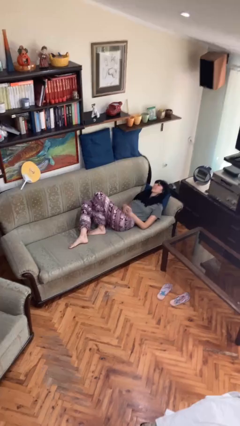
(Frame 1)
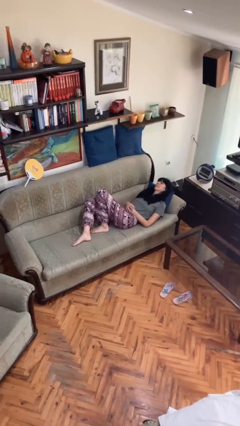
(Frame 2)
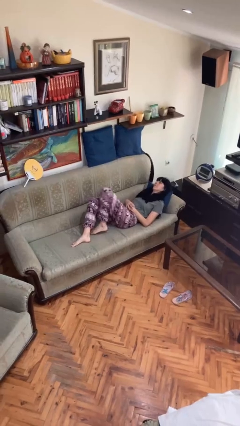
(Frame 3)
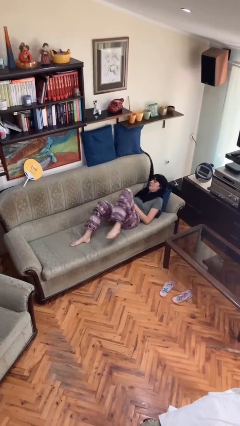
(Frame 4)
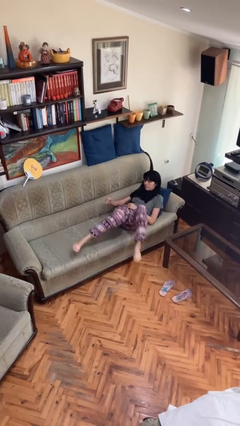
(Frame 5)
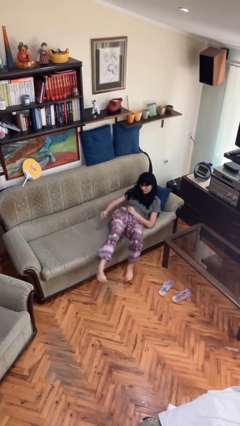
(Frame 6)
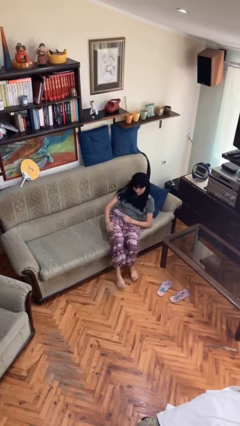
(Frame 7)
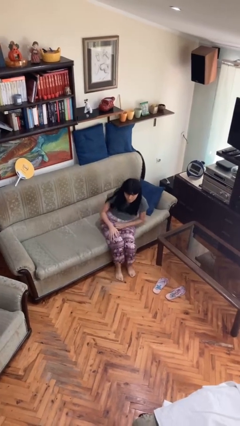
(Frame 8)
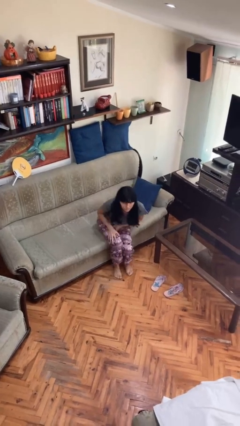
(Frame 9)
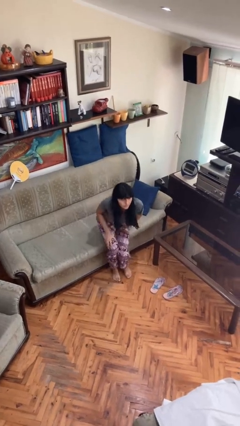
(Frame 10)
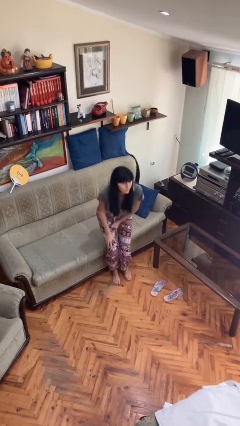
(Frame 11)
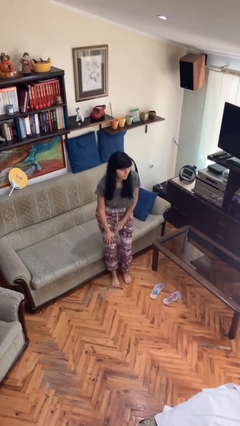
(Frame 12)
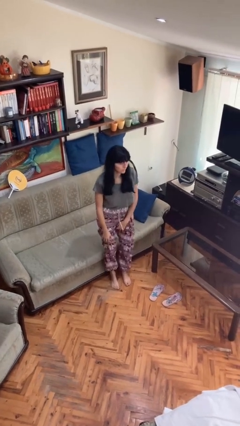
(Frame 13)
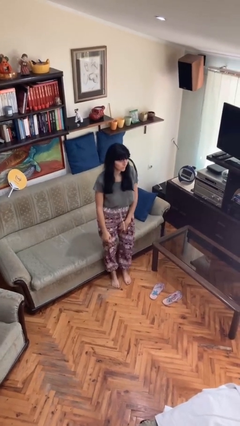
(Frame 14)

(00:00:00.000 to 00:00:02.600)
person stands up

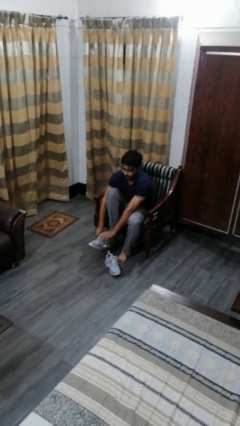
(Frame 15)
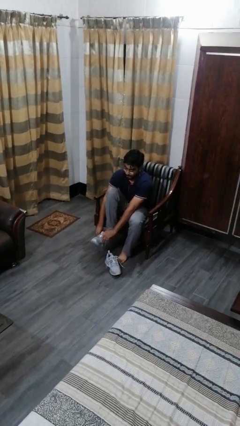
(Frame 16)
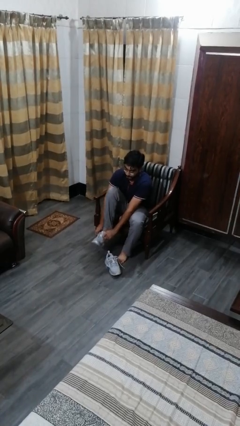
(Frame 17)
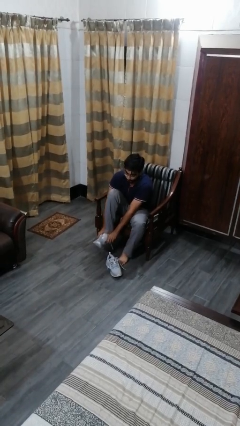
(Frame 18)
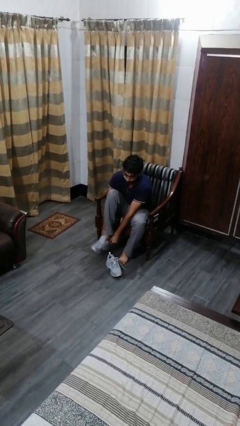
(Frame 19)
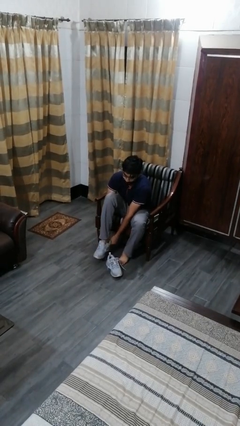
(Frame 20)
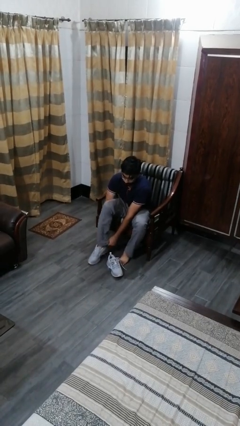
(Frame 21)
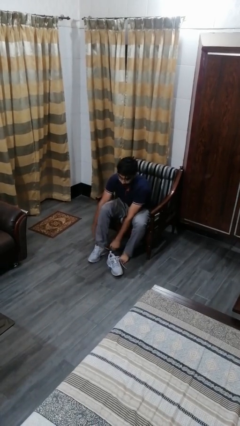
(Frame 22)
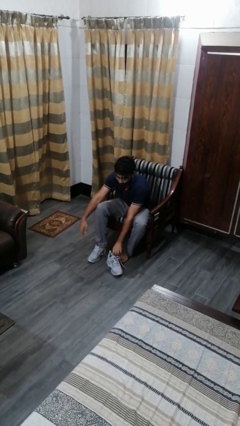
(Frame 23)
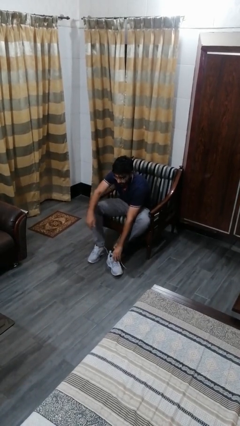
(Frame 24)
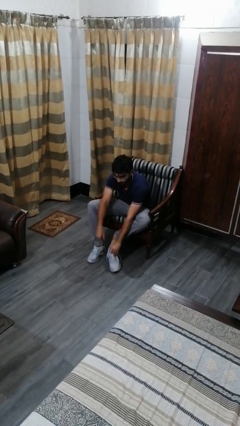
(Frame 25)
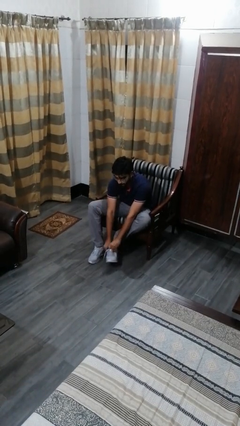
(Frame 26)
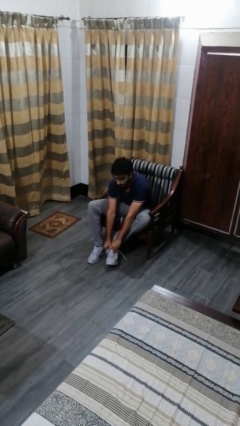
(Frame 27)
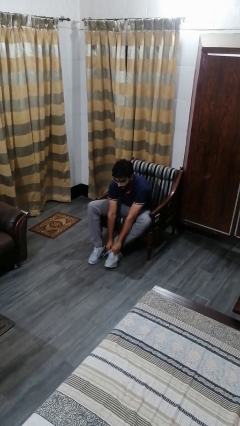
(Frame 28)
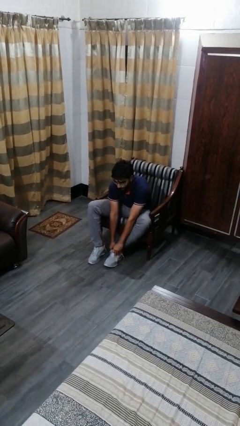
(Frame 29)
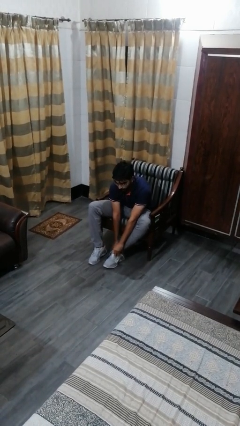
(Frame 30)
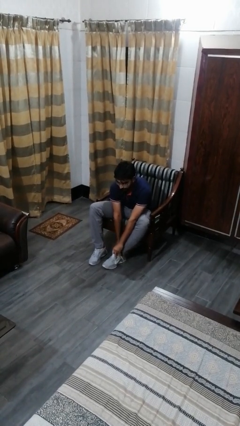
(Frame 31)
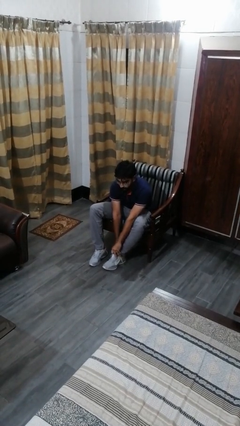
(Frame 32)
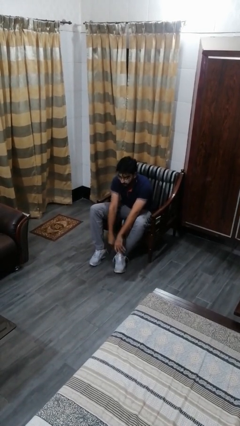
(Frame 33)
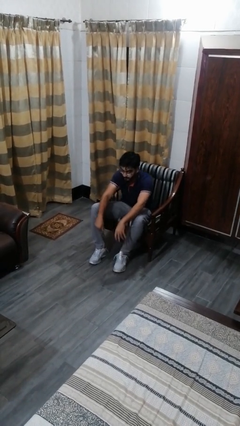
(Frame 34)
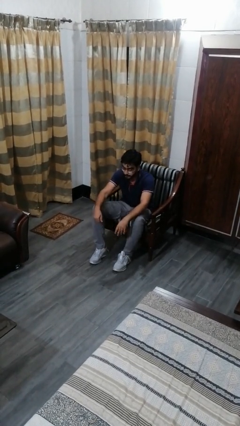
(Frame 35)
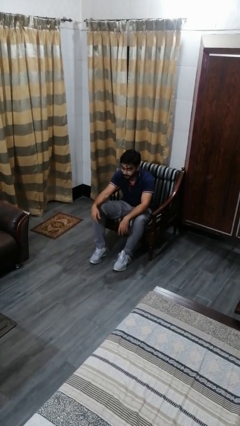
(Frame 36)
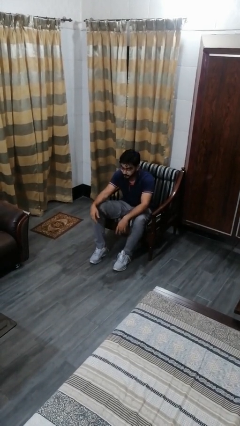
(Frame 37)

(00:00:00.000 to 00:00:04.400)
person puts on shoes

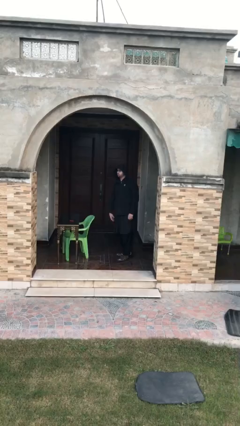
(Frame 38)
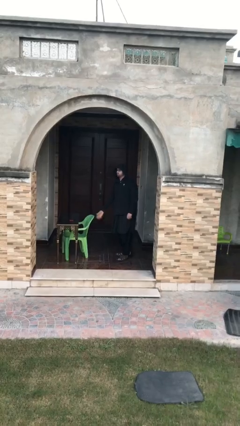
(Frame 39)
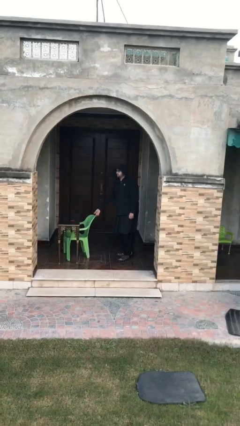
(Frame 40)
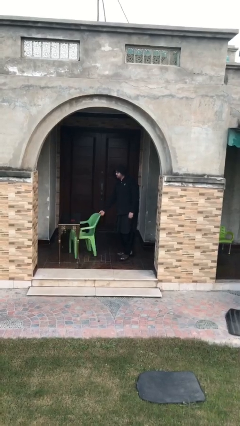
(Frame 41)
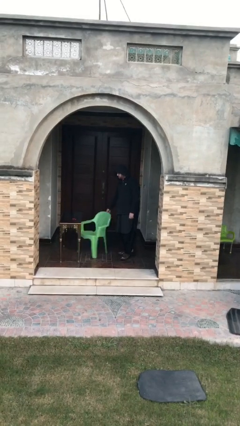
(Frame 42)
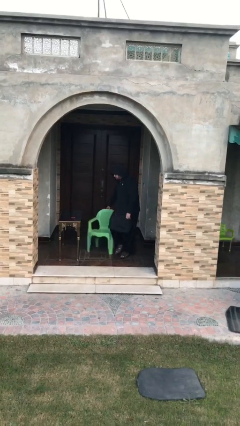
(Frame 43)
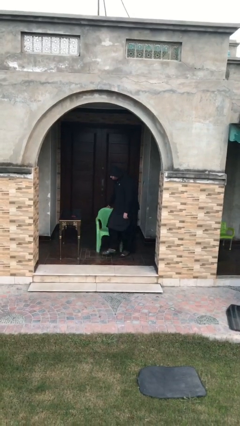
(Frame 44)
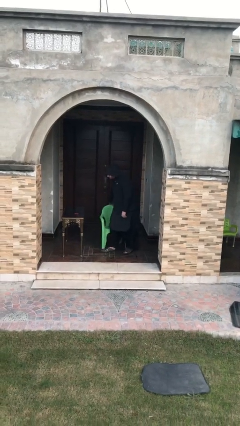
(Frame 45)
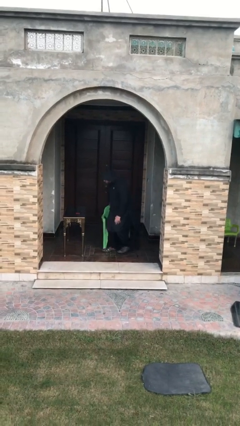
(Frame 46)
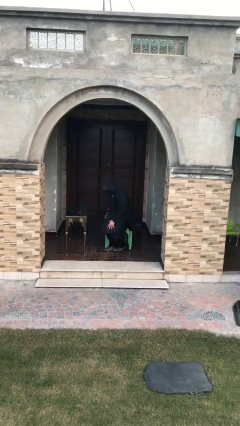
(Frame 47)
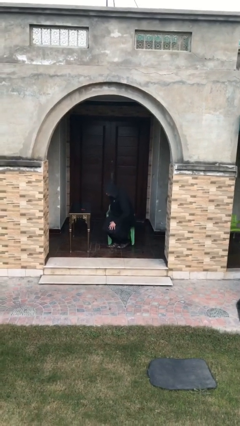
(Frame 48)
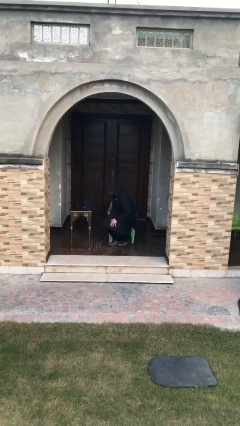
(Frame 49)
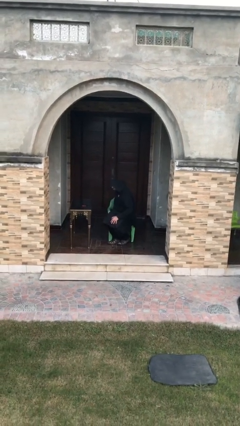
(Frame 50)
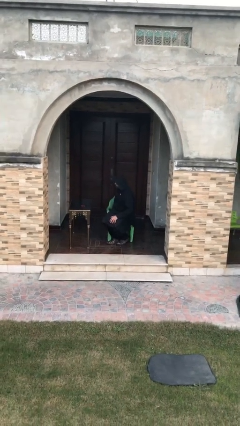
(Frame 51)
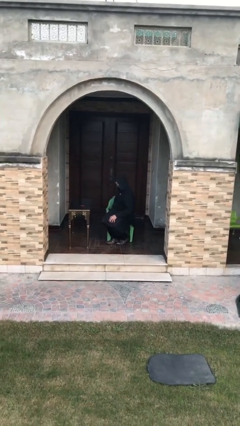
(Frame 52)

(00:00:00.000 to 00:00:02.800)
person sits down

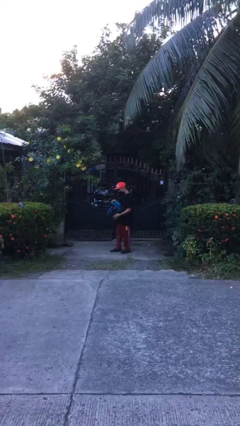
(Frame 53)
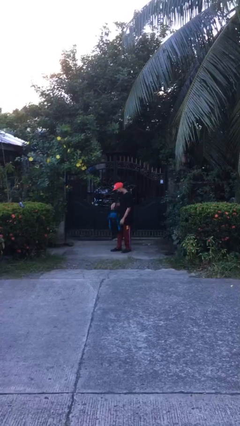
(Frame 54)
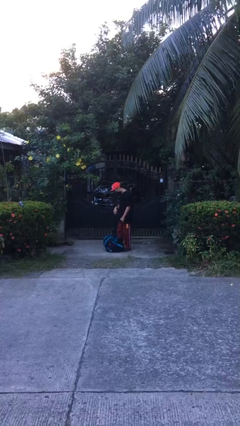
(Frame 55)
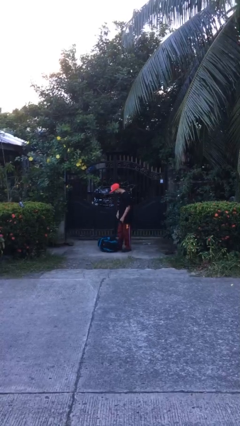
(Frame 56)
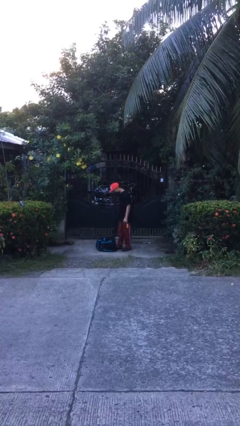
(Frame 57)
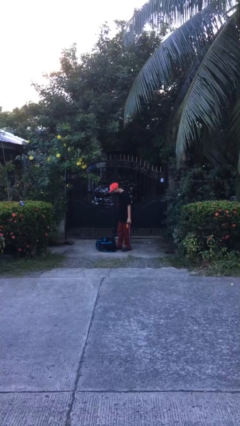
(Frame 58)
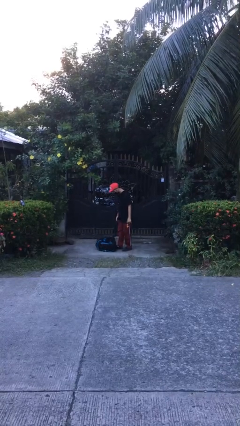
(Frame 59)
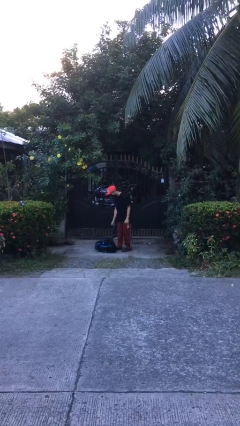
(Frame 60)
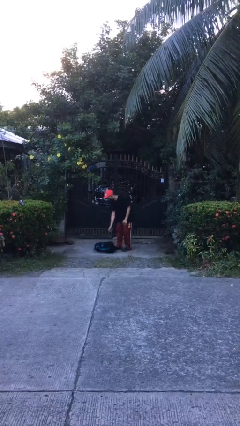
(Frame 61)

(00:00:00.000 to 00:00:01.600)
person drops object

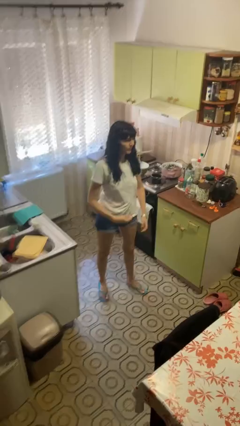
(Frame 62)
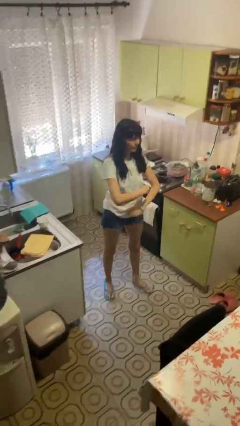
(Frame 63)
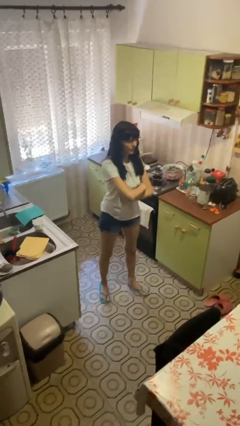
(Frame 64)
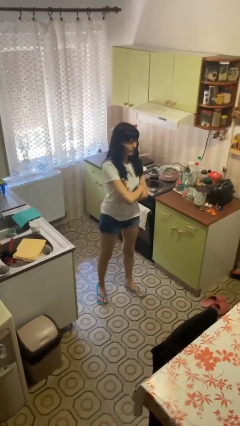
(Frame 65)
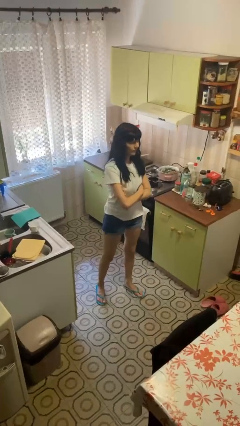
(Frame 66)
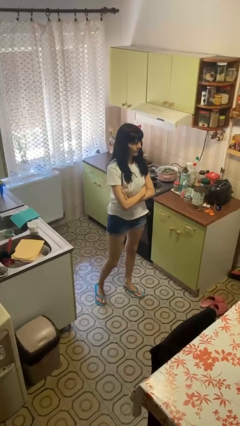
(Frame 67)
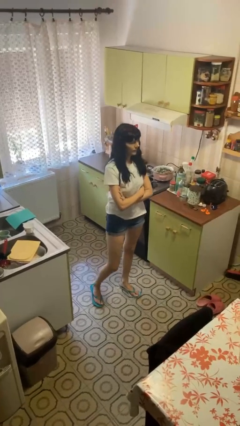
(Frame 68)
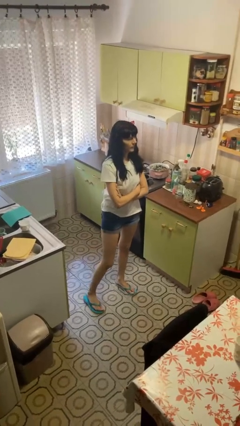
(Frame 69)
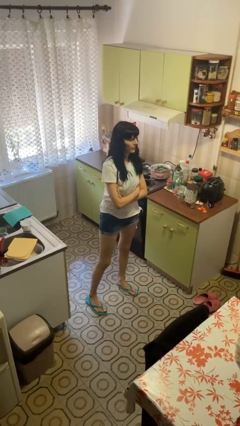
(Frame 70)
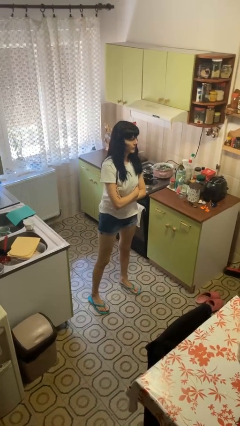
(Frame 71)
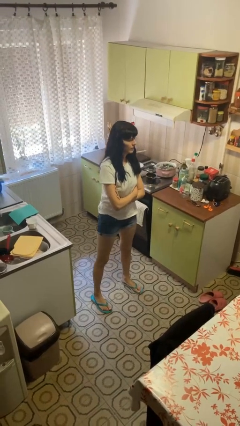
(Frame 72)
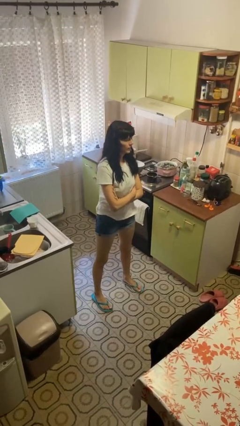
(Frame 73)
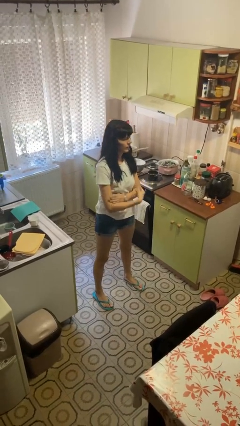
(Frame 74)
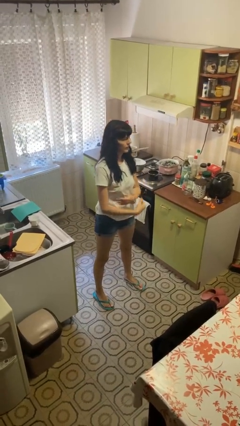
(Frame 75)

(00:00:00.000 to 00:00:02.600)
person crosses arms

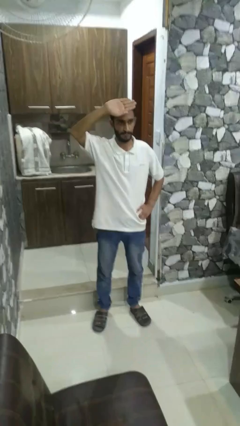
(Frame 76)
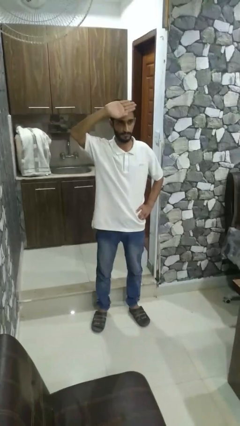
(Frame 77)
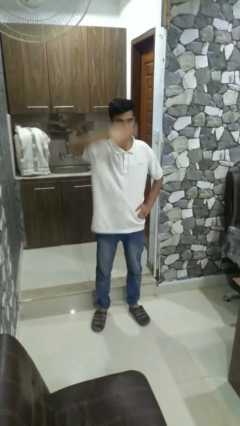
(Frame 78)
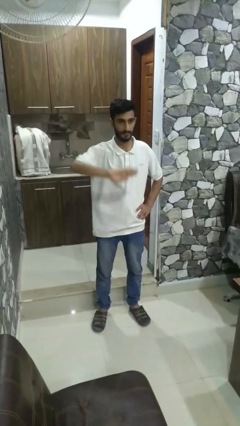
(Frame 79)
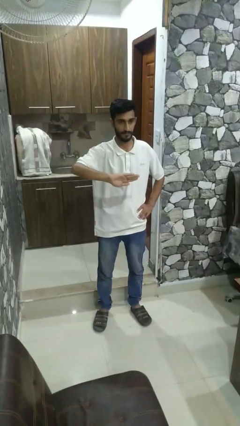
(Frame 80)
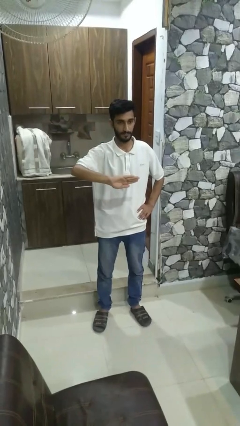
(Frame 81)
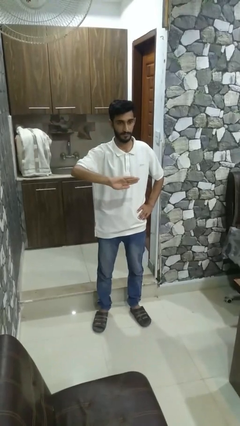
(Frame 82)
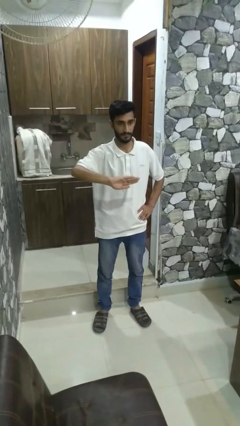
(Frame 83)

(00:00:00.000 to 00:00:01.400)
person gestures swipe down

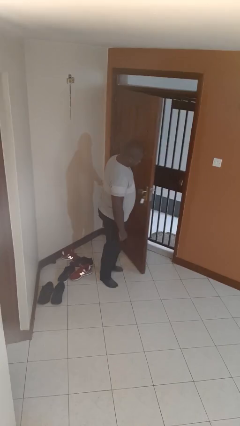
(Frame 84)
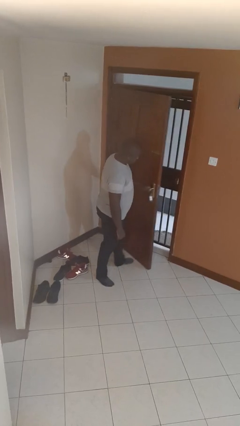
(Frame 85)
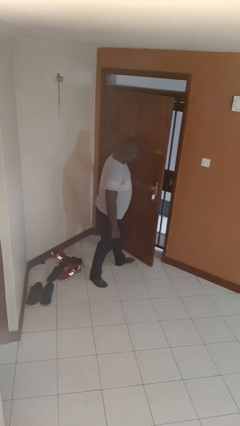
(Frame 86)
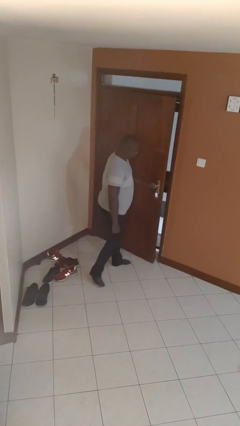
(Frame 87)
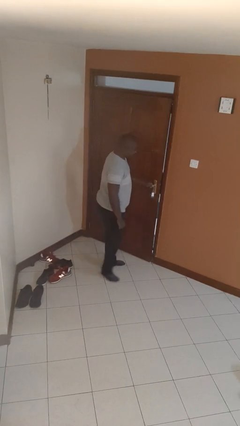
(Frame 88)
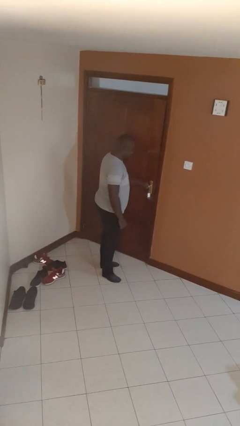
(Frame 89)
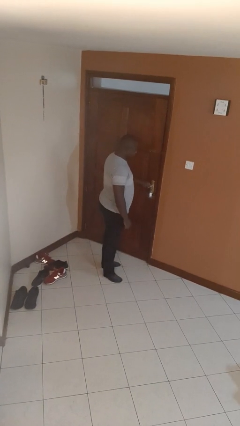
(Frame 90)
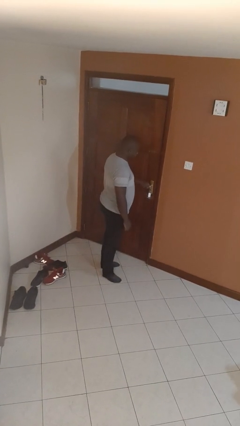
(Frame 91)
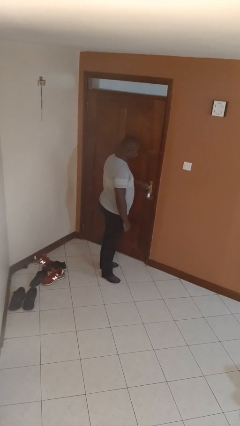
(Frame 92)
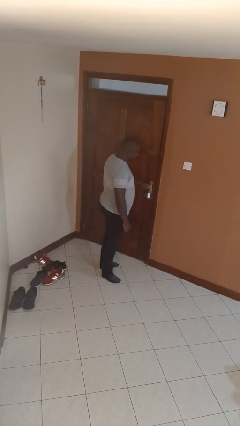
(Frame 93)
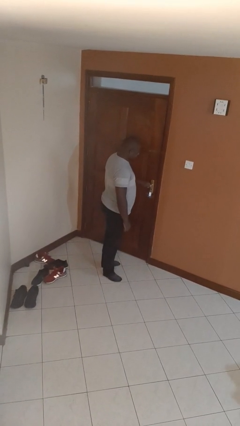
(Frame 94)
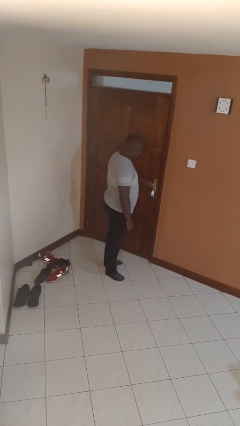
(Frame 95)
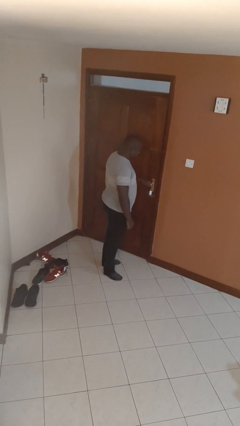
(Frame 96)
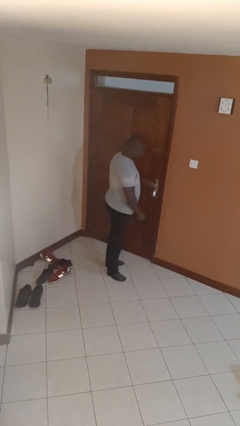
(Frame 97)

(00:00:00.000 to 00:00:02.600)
person closes facility door
